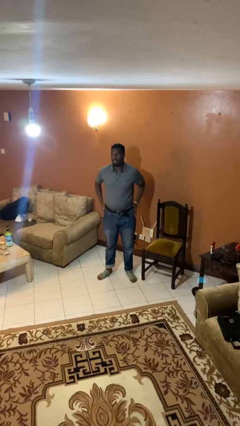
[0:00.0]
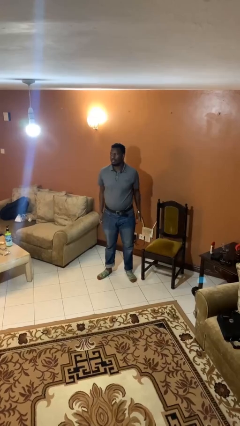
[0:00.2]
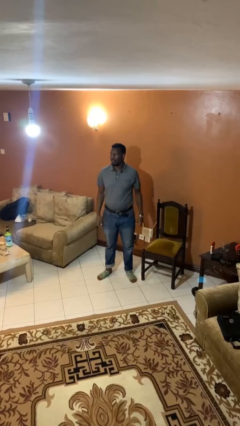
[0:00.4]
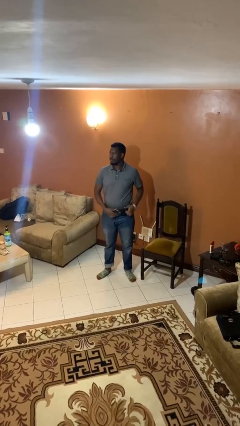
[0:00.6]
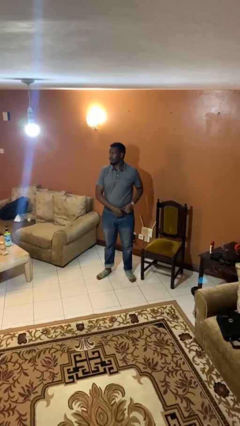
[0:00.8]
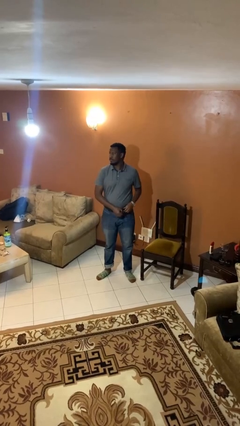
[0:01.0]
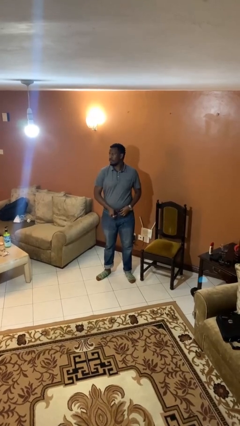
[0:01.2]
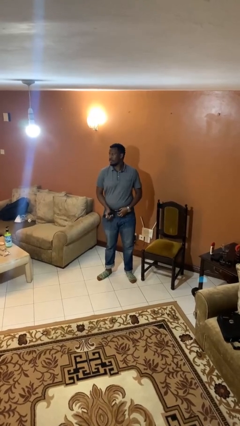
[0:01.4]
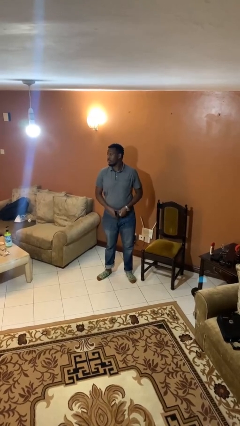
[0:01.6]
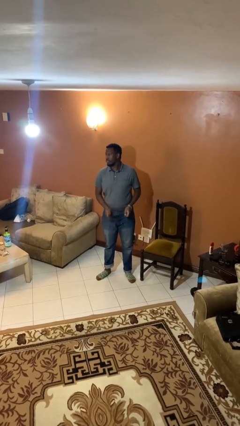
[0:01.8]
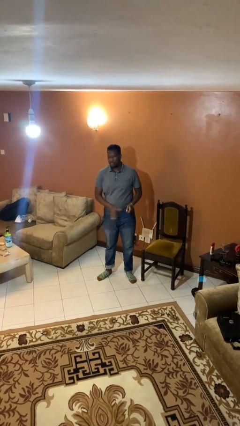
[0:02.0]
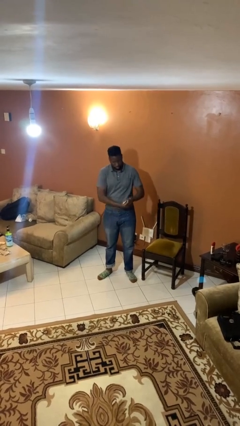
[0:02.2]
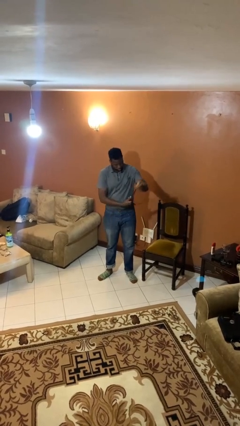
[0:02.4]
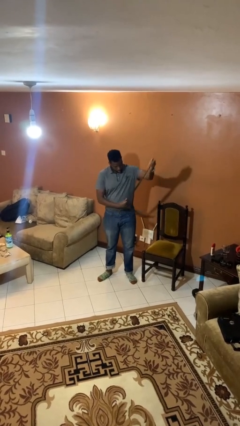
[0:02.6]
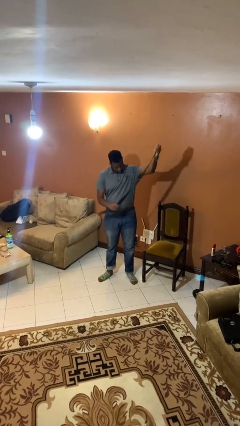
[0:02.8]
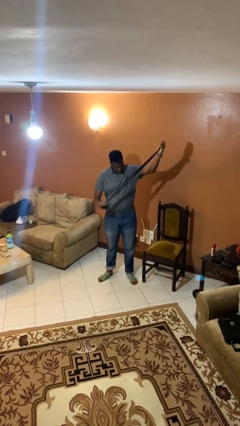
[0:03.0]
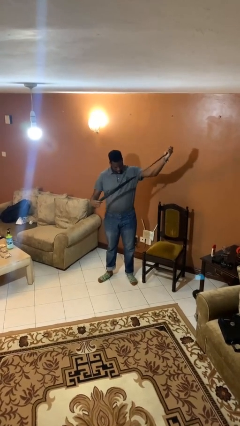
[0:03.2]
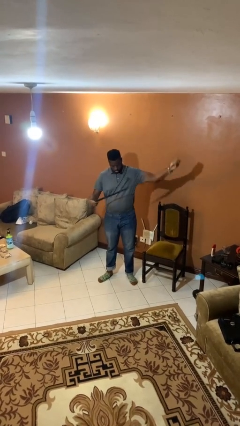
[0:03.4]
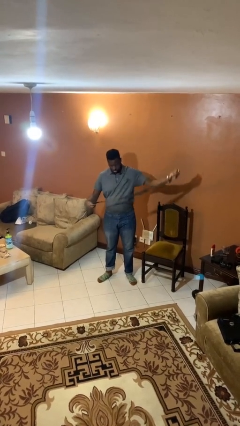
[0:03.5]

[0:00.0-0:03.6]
person takes off belt

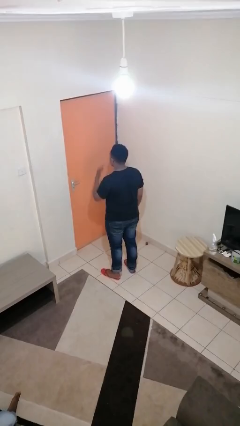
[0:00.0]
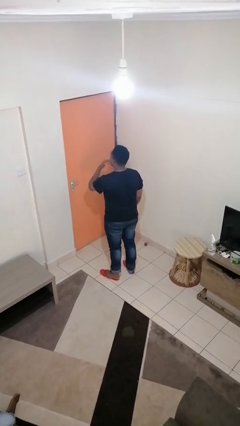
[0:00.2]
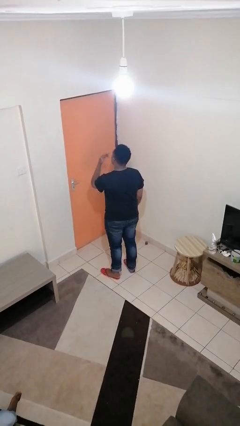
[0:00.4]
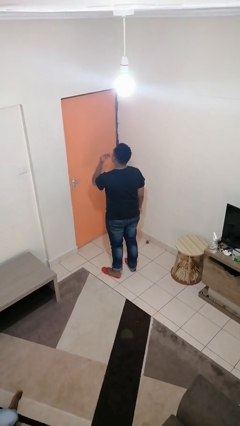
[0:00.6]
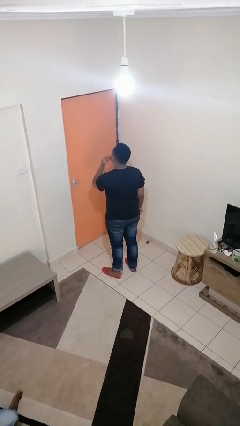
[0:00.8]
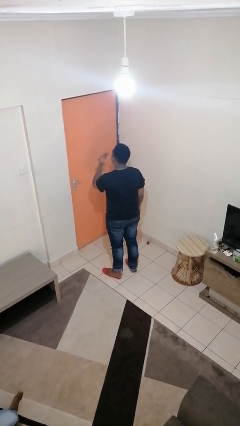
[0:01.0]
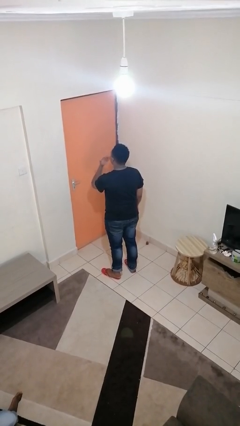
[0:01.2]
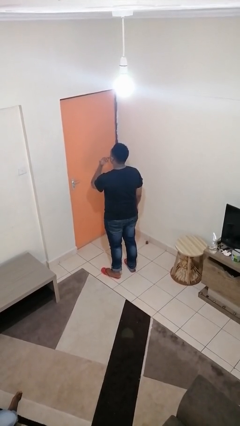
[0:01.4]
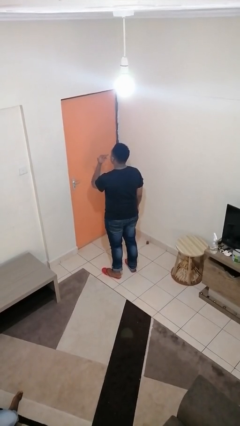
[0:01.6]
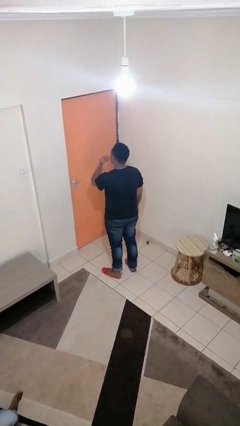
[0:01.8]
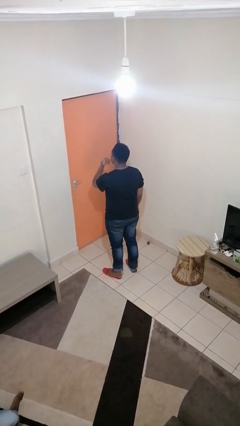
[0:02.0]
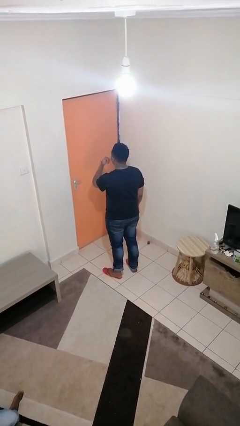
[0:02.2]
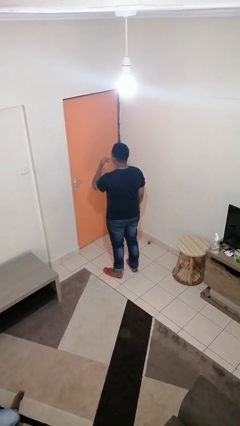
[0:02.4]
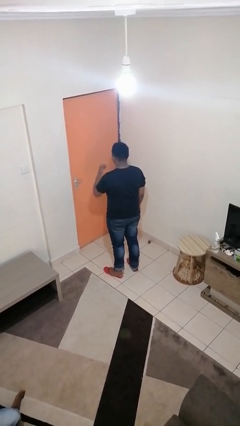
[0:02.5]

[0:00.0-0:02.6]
person licks fingers

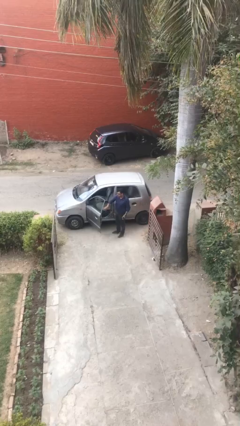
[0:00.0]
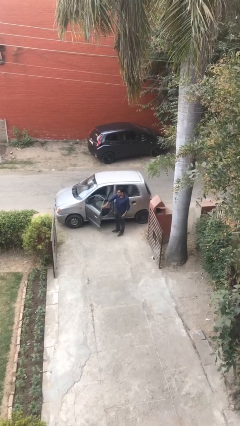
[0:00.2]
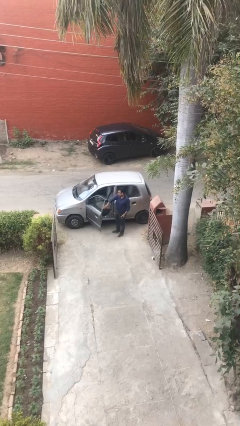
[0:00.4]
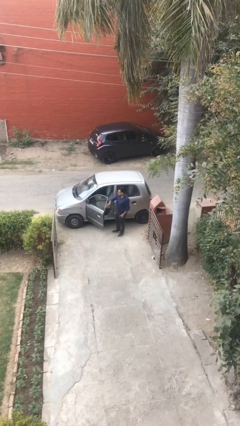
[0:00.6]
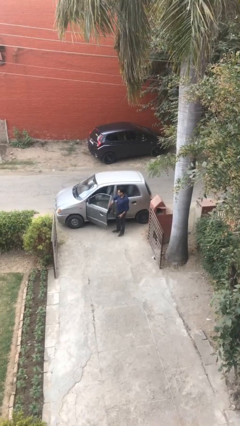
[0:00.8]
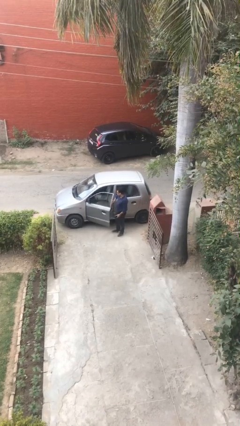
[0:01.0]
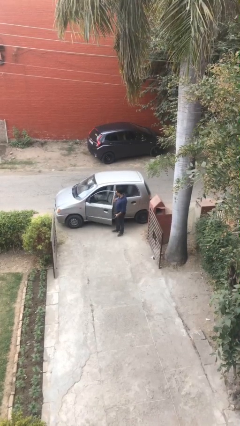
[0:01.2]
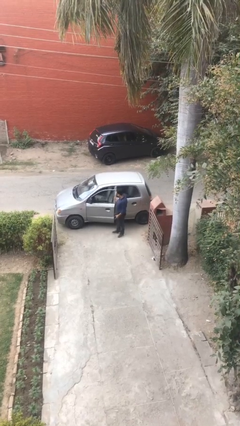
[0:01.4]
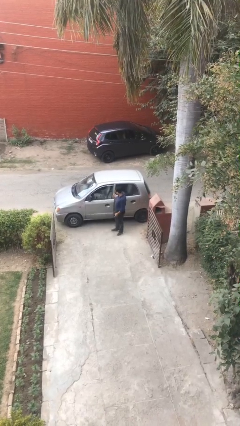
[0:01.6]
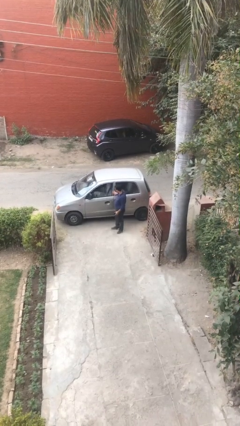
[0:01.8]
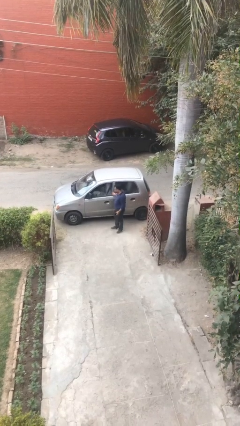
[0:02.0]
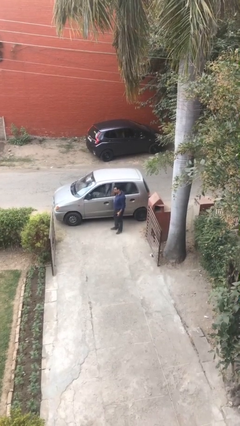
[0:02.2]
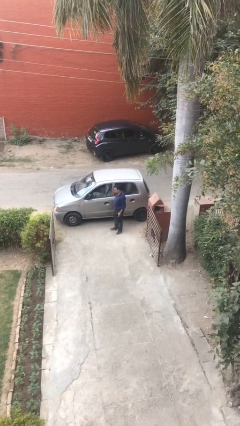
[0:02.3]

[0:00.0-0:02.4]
person closes car door

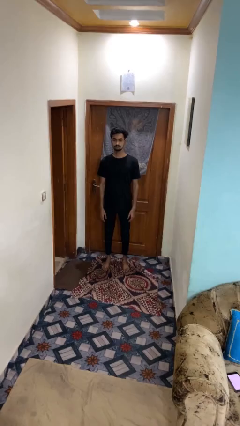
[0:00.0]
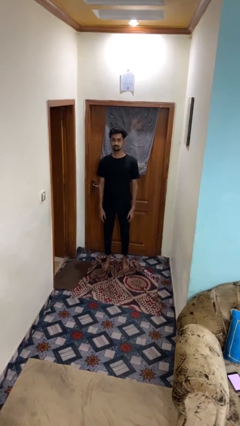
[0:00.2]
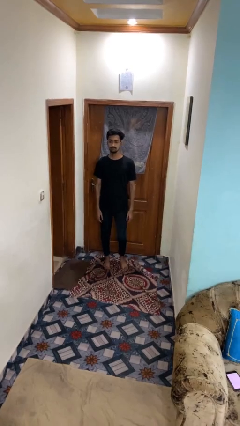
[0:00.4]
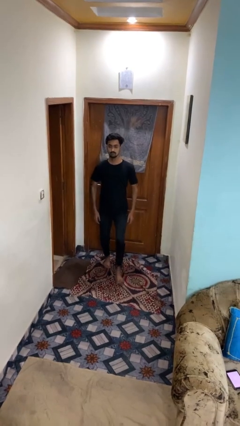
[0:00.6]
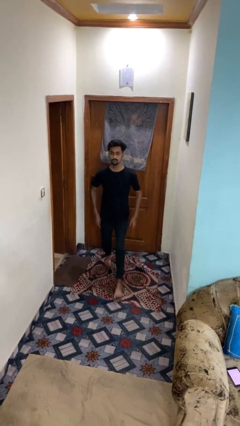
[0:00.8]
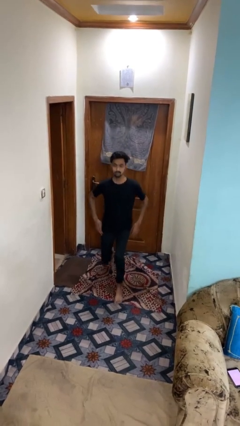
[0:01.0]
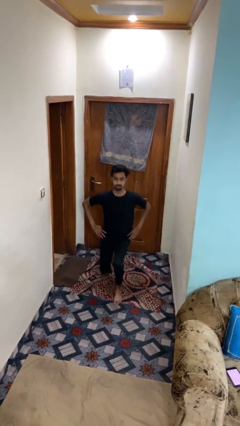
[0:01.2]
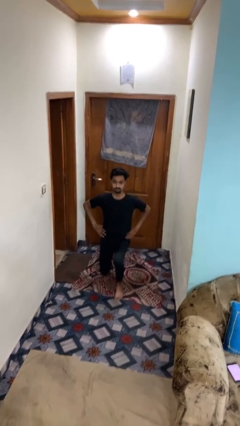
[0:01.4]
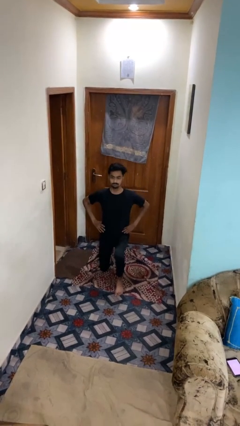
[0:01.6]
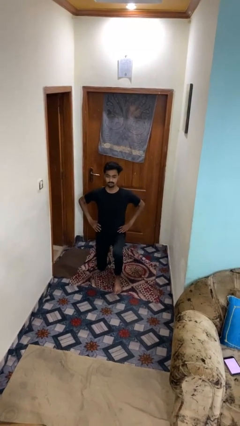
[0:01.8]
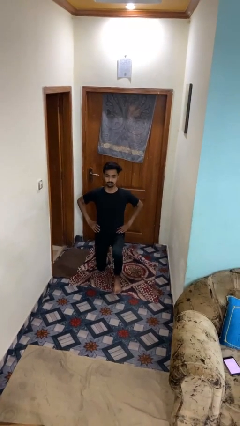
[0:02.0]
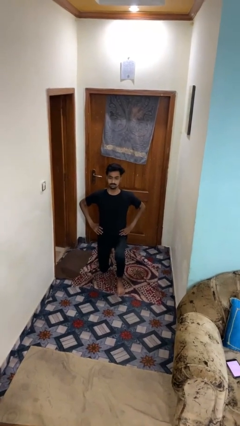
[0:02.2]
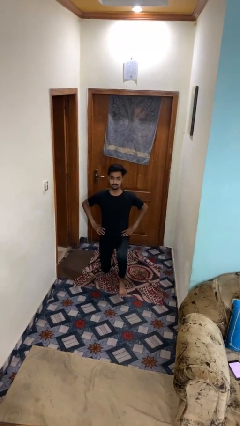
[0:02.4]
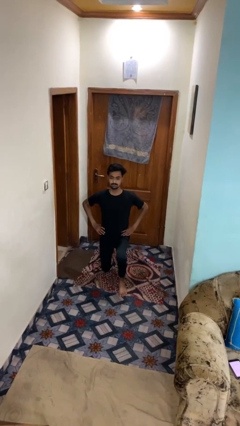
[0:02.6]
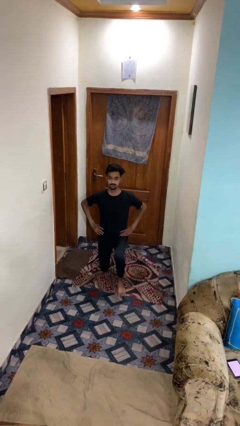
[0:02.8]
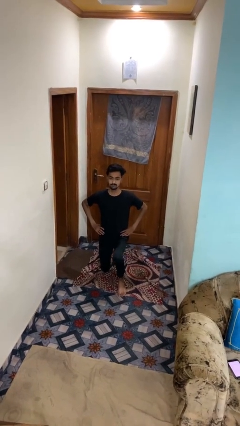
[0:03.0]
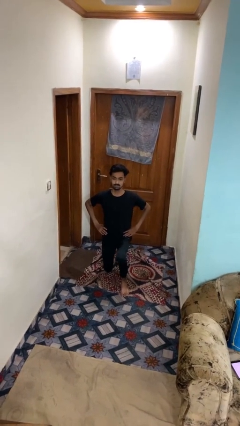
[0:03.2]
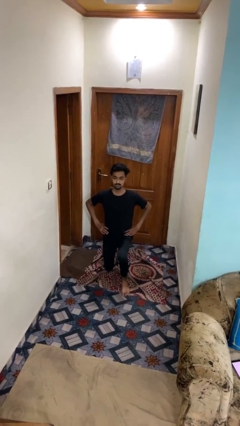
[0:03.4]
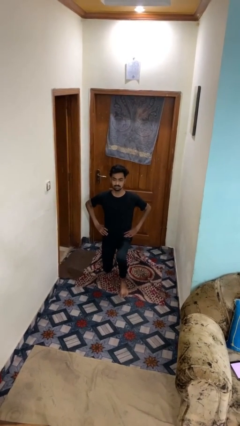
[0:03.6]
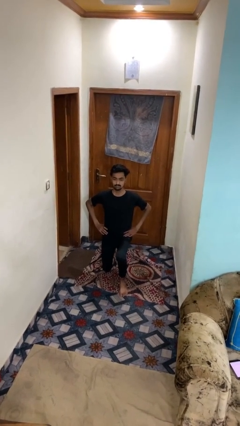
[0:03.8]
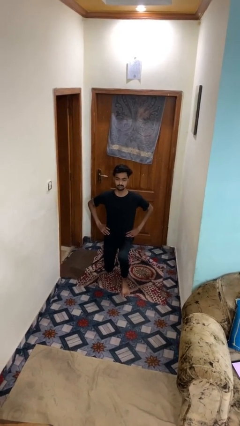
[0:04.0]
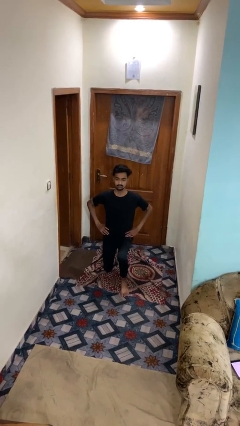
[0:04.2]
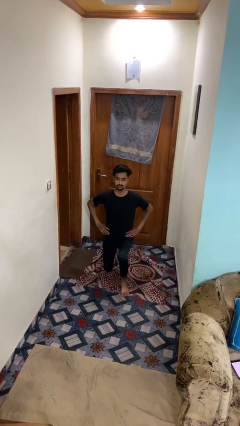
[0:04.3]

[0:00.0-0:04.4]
person exercises with lunges

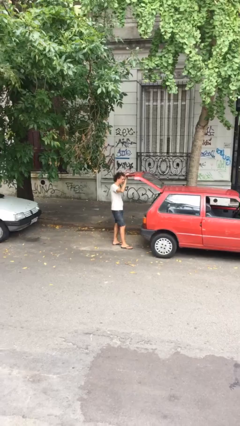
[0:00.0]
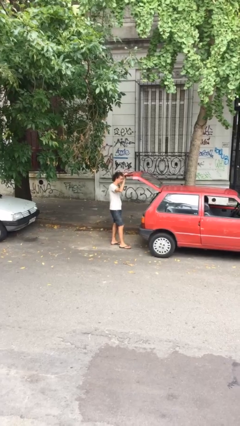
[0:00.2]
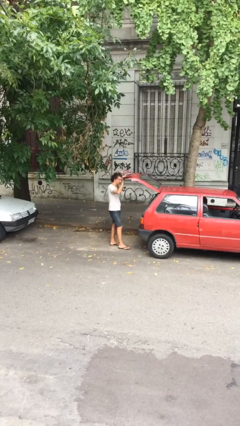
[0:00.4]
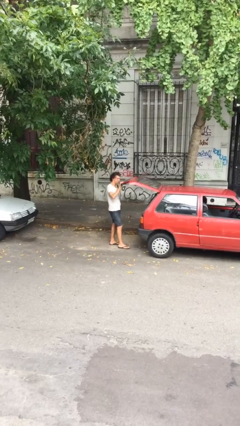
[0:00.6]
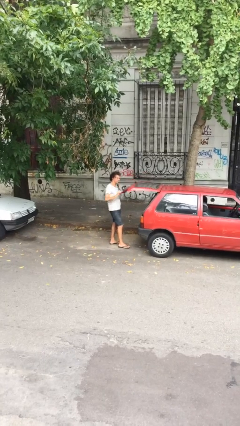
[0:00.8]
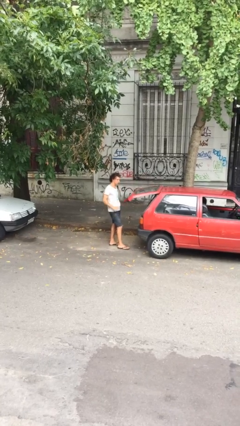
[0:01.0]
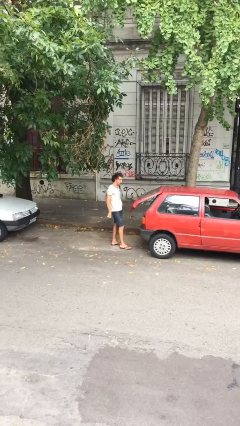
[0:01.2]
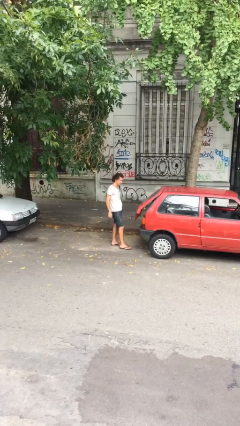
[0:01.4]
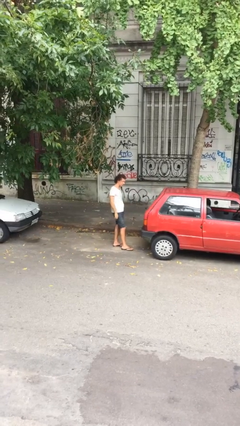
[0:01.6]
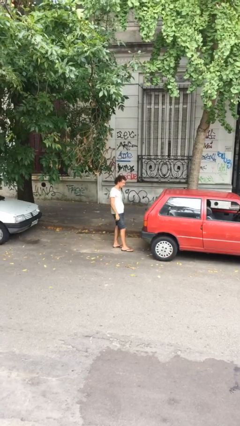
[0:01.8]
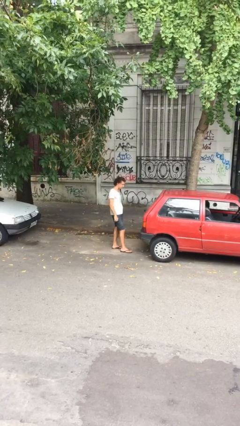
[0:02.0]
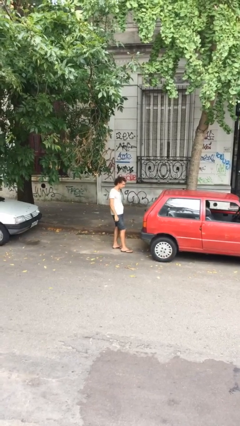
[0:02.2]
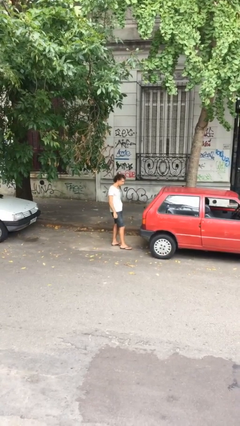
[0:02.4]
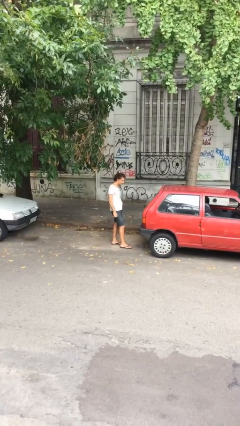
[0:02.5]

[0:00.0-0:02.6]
person closes car trunk

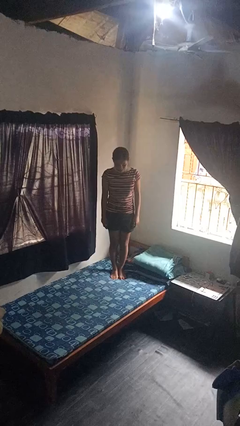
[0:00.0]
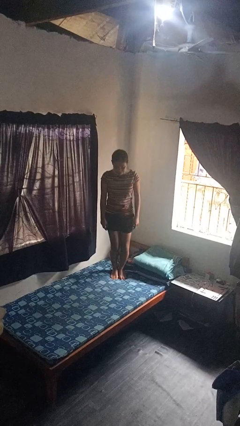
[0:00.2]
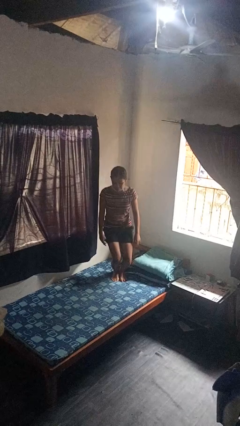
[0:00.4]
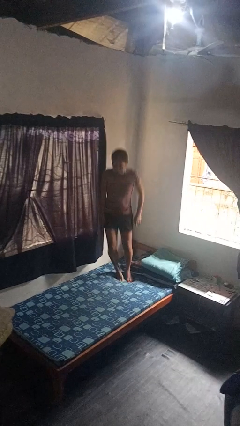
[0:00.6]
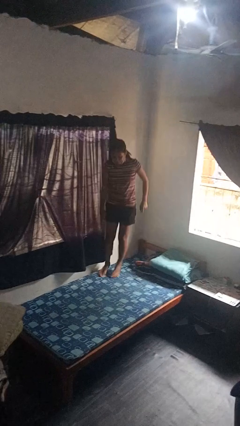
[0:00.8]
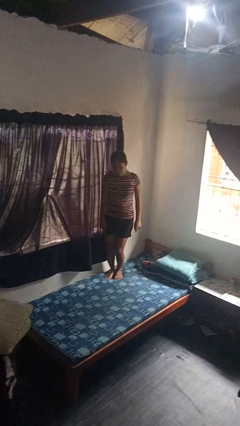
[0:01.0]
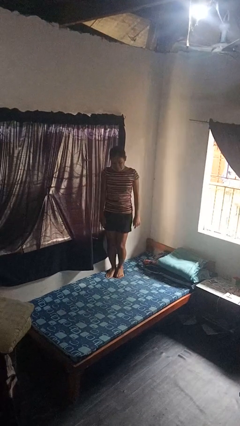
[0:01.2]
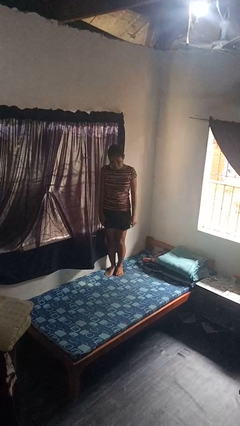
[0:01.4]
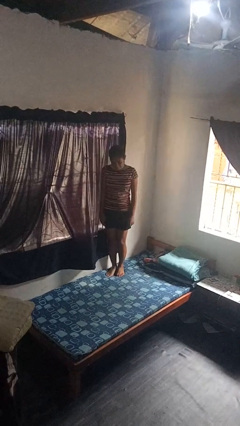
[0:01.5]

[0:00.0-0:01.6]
person jumps on bed
